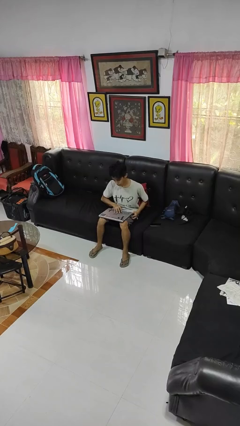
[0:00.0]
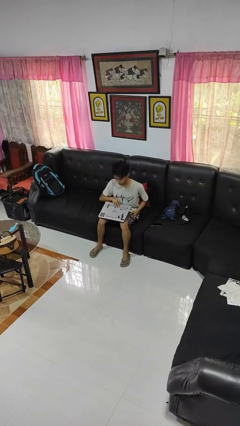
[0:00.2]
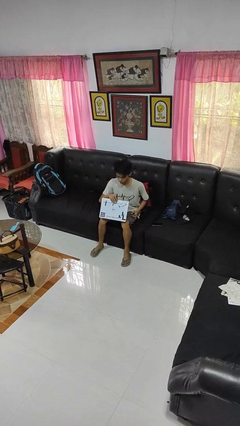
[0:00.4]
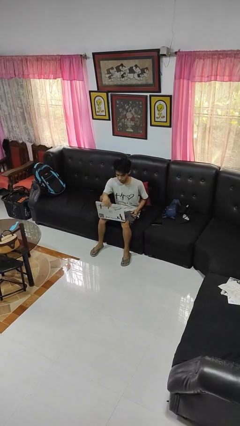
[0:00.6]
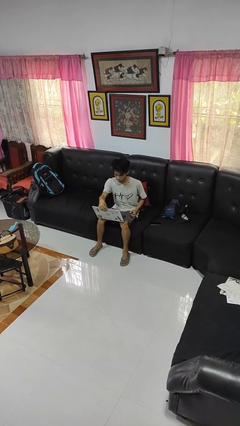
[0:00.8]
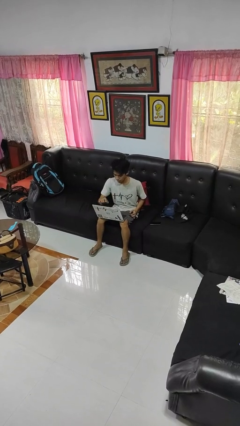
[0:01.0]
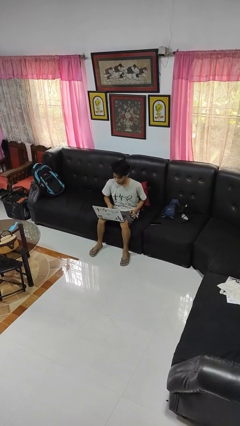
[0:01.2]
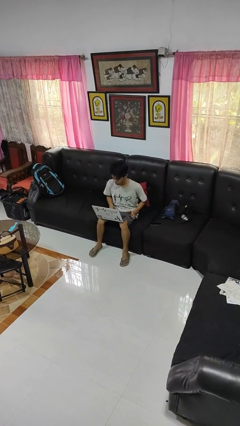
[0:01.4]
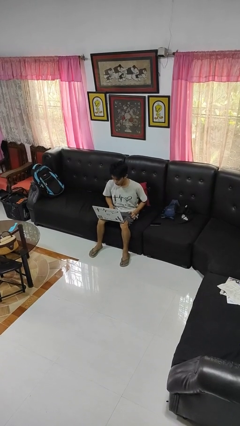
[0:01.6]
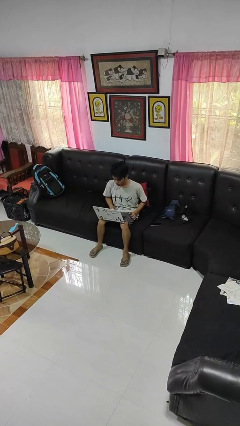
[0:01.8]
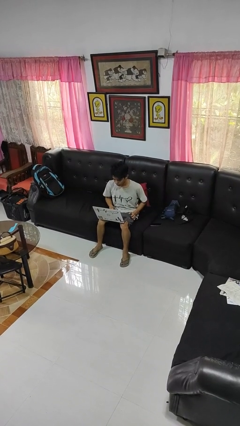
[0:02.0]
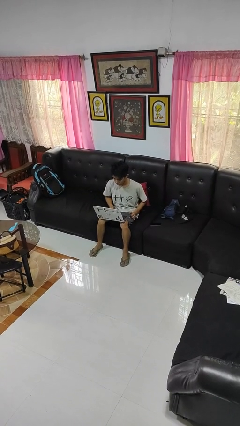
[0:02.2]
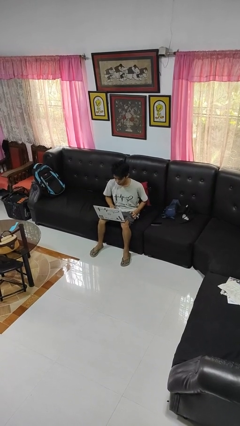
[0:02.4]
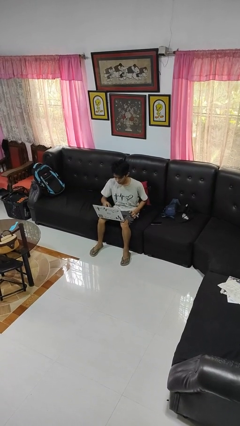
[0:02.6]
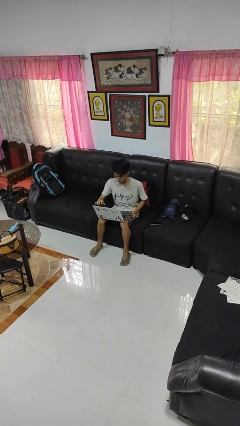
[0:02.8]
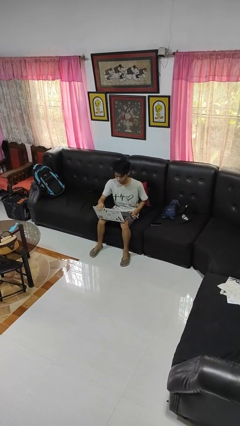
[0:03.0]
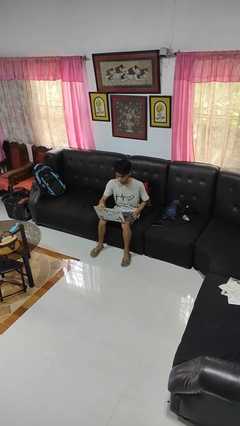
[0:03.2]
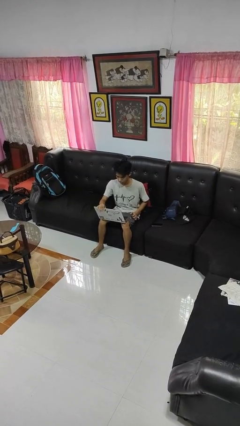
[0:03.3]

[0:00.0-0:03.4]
person opens laptop

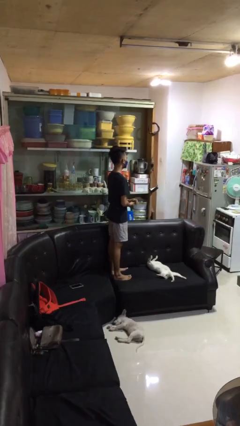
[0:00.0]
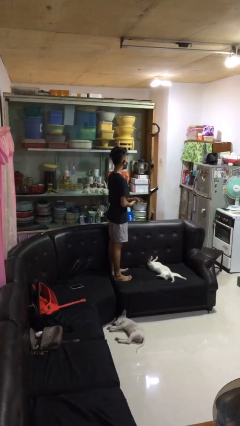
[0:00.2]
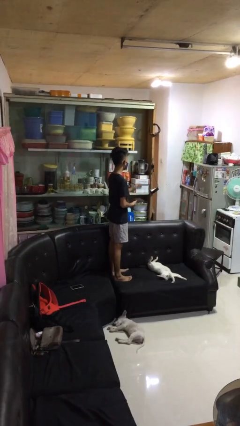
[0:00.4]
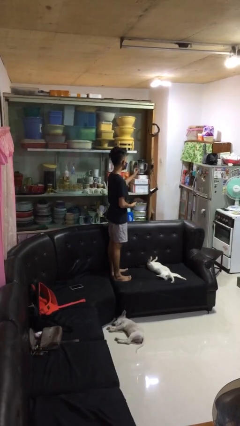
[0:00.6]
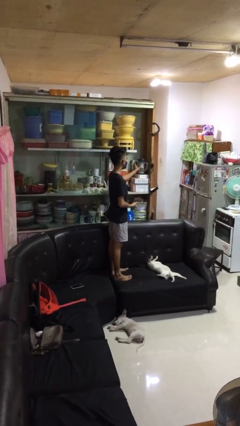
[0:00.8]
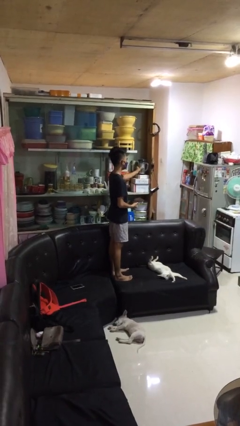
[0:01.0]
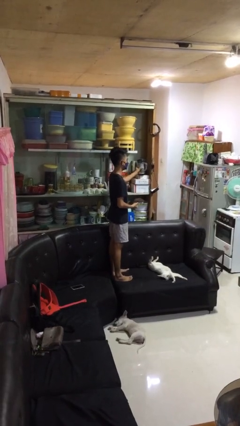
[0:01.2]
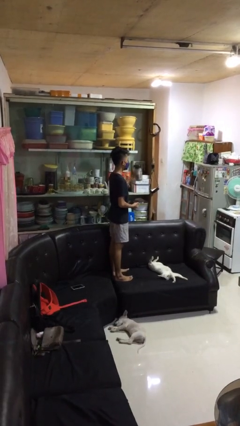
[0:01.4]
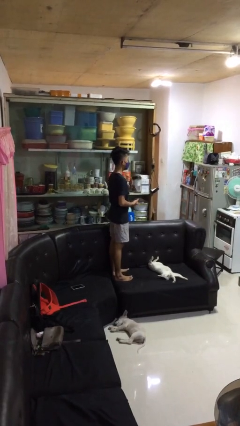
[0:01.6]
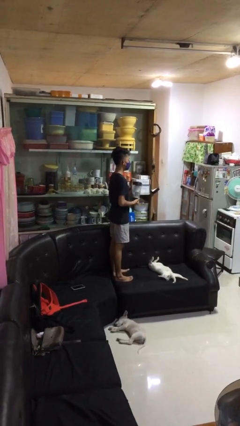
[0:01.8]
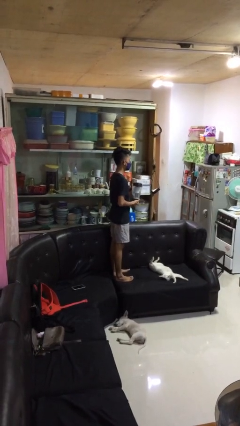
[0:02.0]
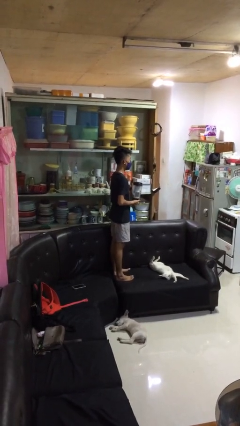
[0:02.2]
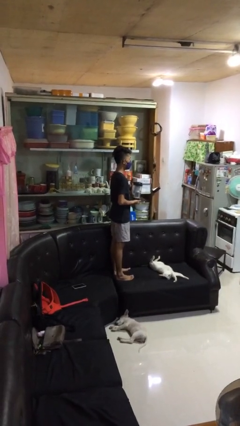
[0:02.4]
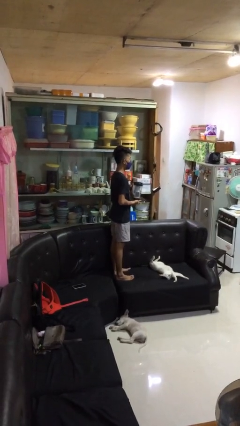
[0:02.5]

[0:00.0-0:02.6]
person picks up object from cabinet

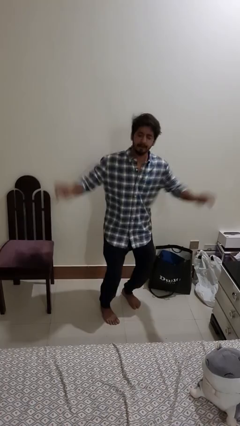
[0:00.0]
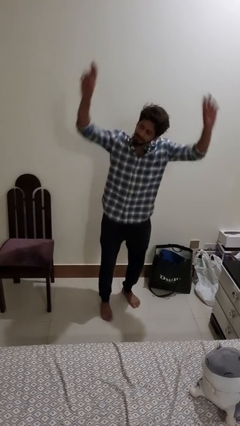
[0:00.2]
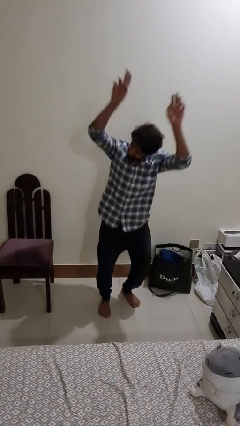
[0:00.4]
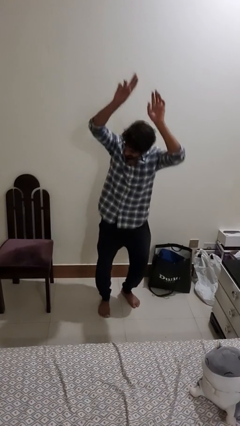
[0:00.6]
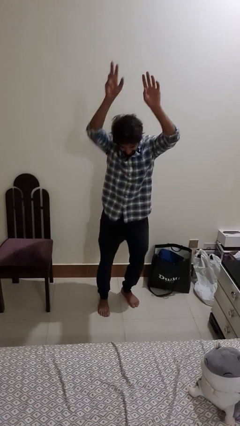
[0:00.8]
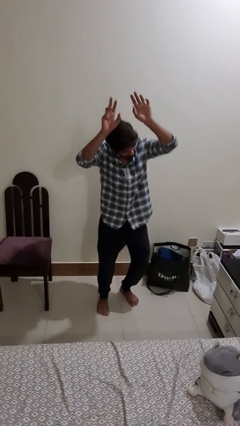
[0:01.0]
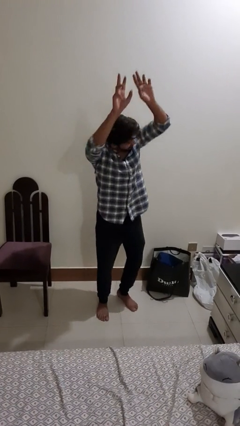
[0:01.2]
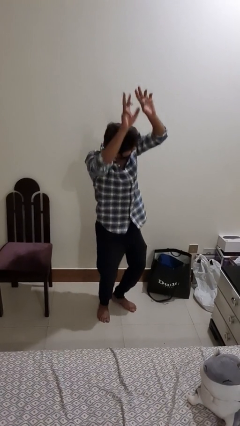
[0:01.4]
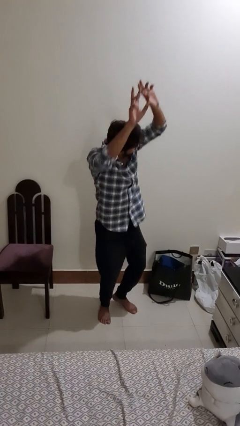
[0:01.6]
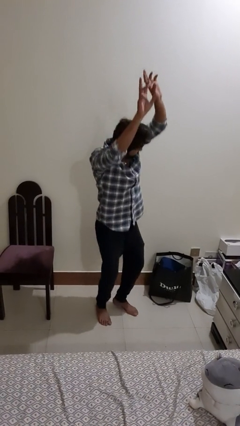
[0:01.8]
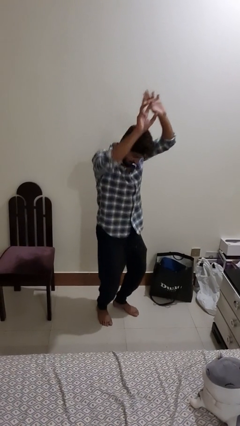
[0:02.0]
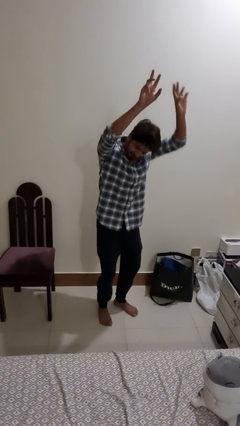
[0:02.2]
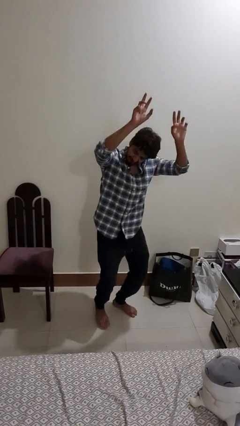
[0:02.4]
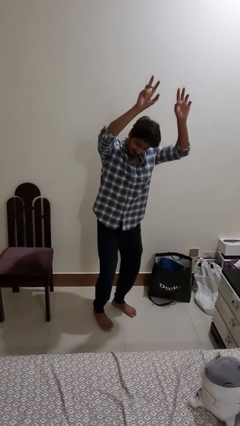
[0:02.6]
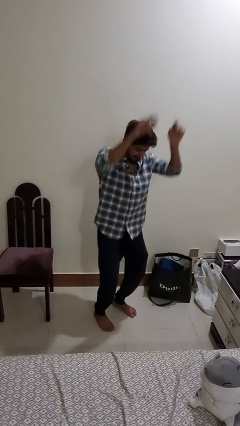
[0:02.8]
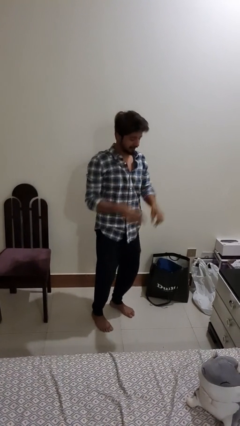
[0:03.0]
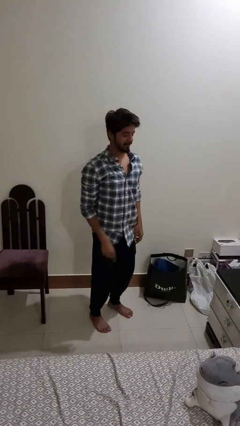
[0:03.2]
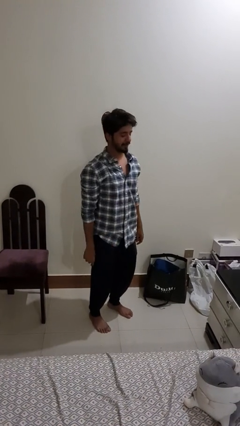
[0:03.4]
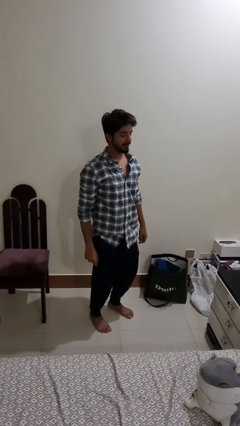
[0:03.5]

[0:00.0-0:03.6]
person dances in place

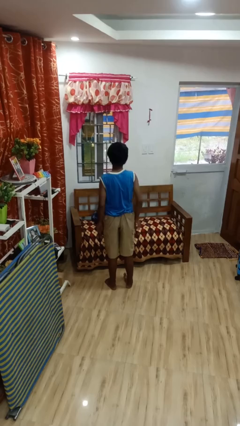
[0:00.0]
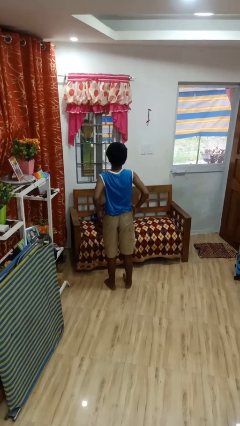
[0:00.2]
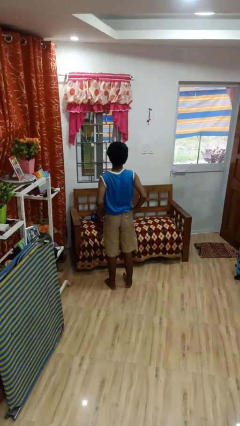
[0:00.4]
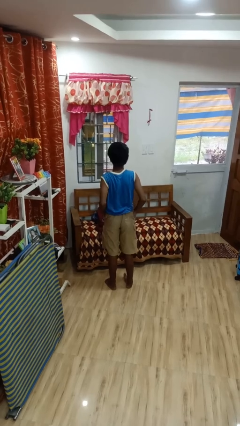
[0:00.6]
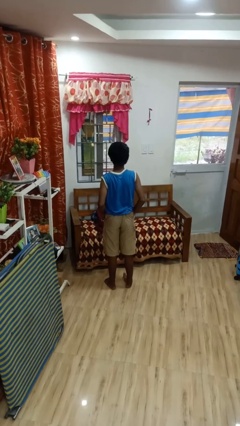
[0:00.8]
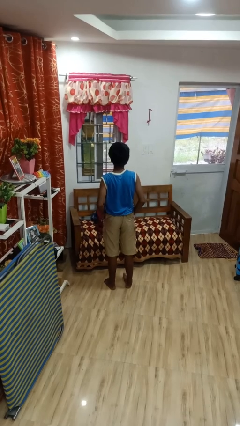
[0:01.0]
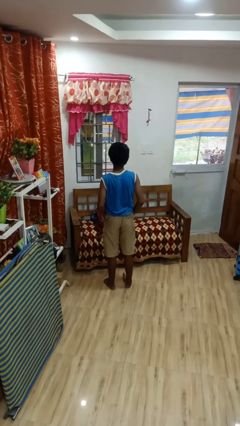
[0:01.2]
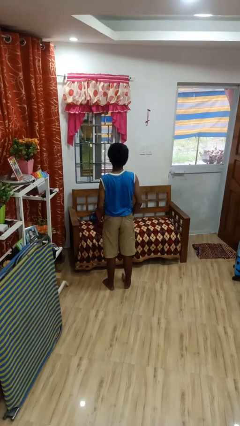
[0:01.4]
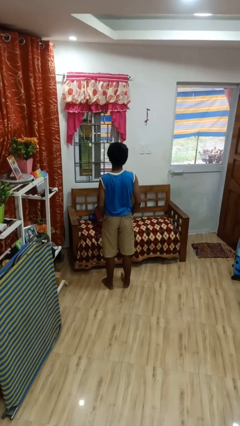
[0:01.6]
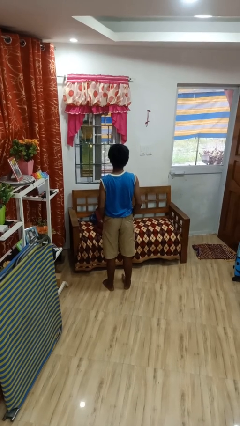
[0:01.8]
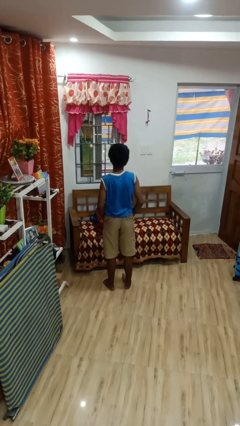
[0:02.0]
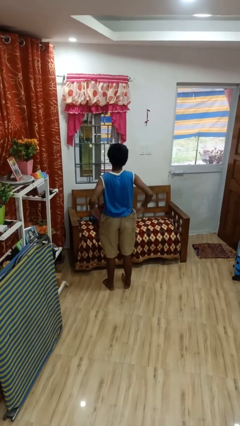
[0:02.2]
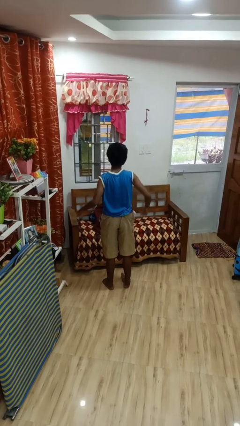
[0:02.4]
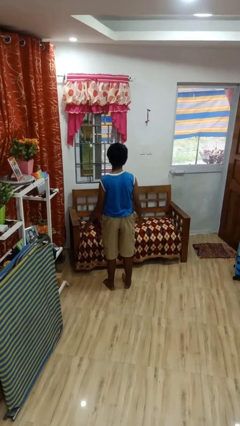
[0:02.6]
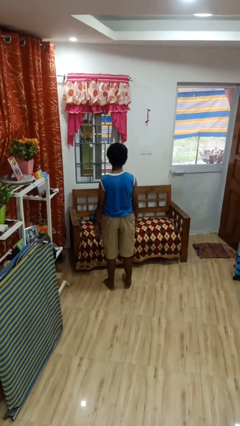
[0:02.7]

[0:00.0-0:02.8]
person puts hands in back pockets

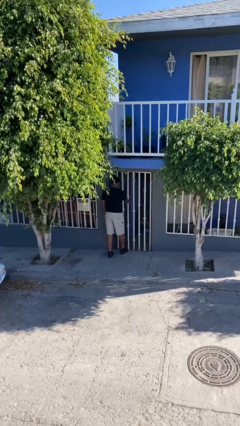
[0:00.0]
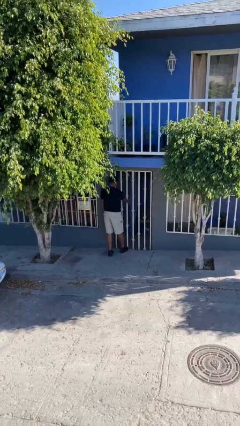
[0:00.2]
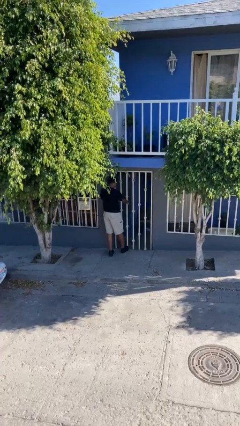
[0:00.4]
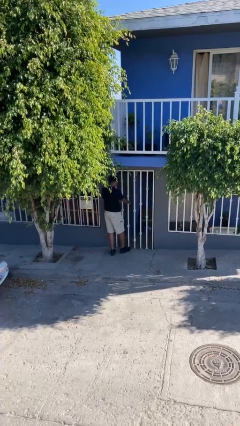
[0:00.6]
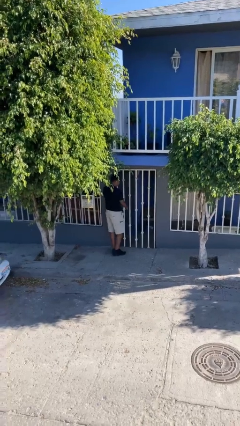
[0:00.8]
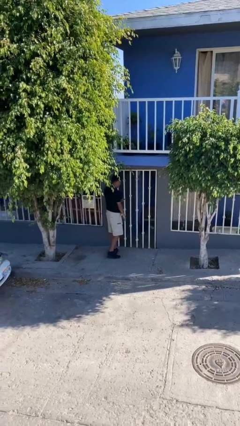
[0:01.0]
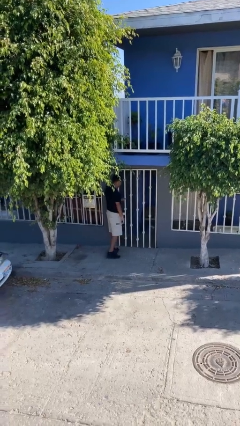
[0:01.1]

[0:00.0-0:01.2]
person closes facility door

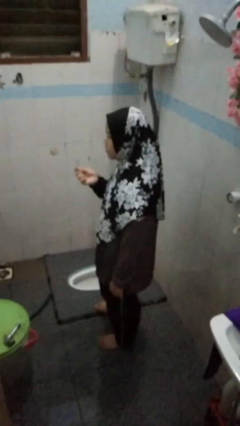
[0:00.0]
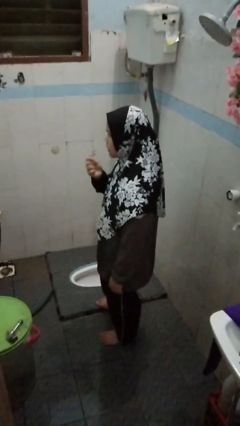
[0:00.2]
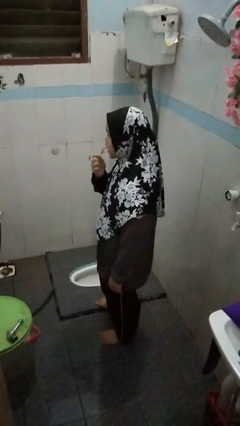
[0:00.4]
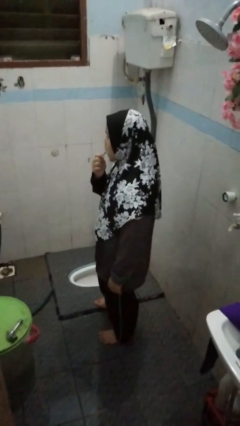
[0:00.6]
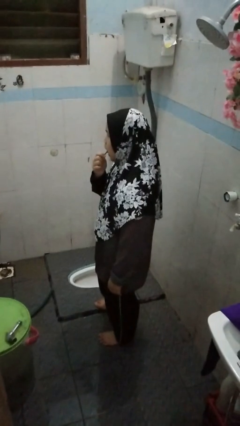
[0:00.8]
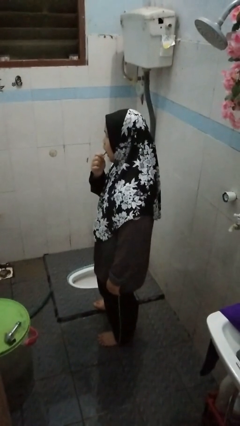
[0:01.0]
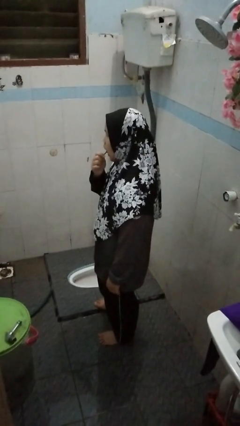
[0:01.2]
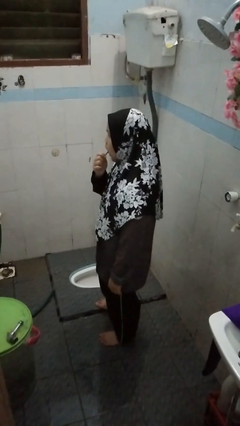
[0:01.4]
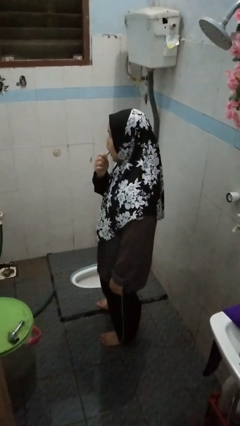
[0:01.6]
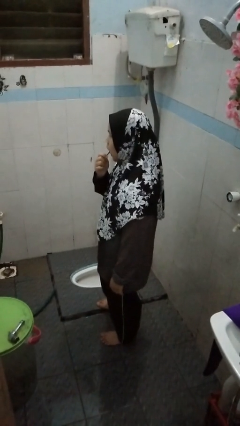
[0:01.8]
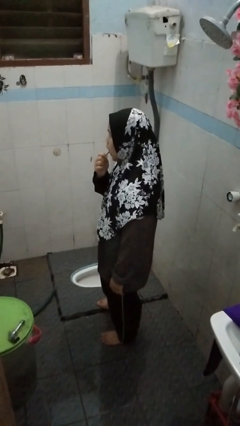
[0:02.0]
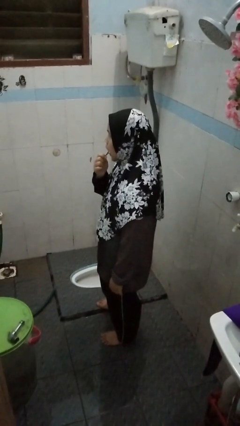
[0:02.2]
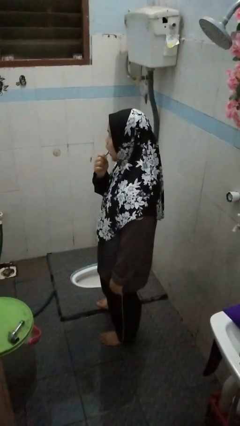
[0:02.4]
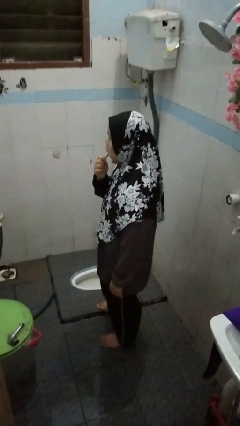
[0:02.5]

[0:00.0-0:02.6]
person flosses

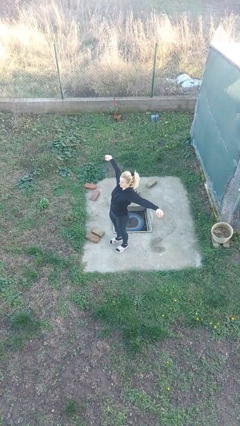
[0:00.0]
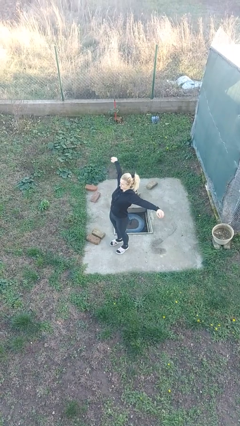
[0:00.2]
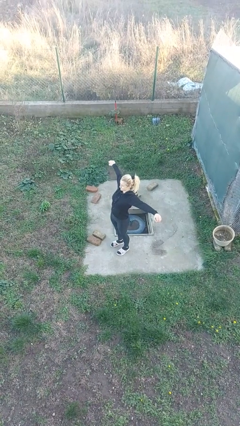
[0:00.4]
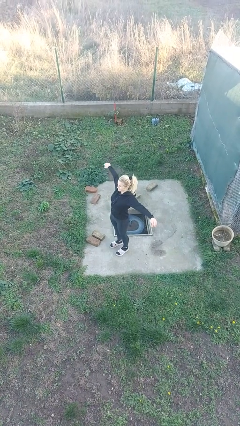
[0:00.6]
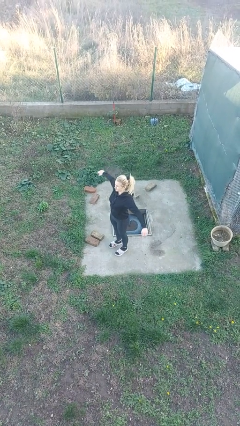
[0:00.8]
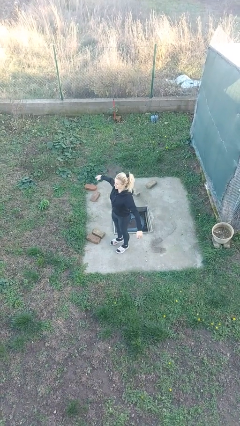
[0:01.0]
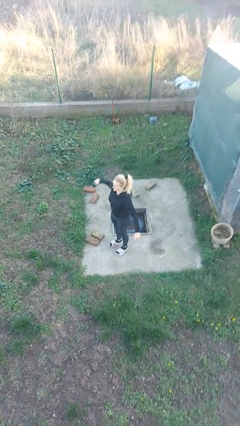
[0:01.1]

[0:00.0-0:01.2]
person stretches arms to side
